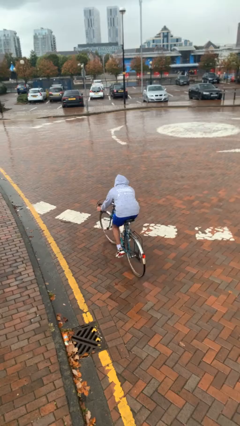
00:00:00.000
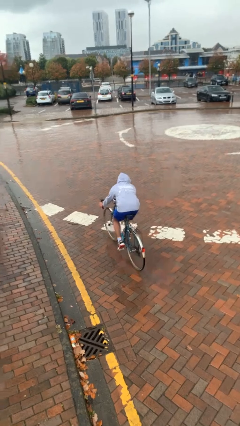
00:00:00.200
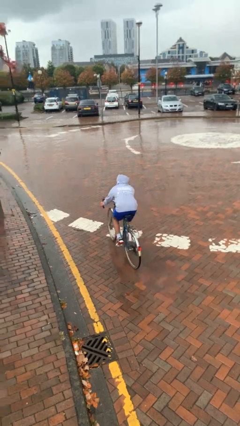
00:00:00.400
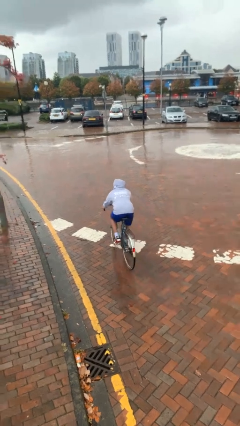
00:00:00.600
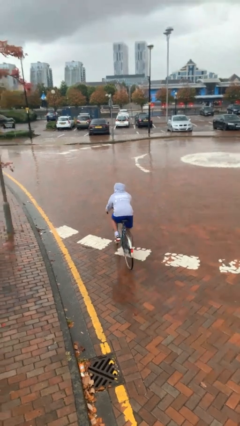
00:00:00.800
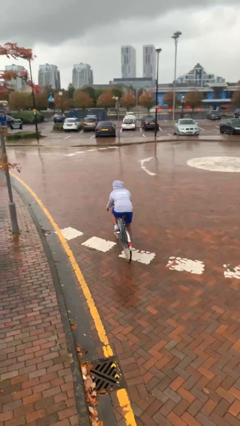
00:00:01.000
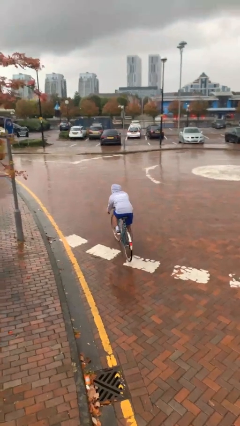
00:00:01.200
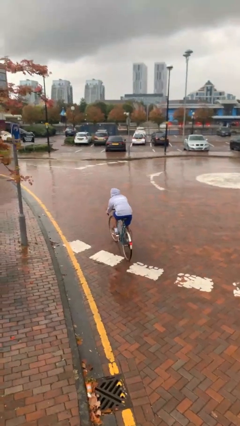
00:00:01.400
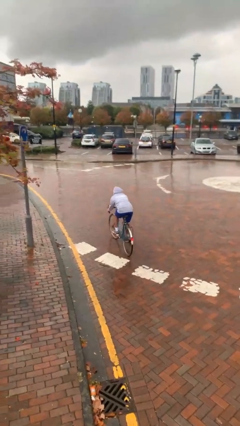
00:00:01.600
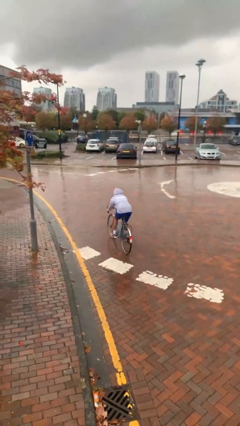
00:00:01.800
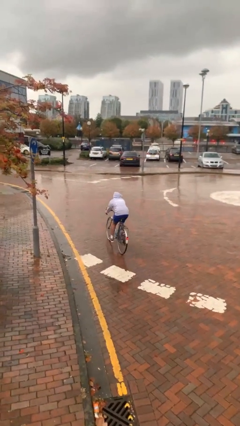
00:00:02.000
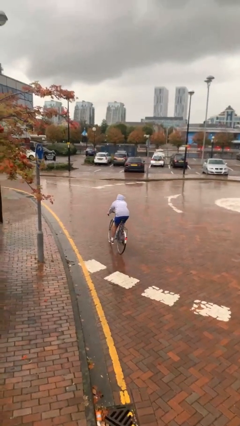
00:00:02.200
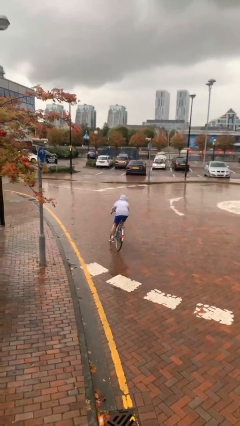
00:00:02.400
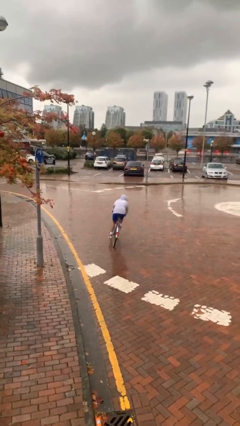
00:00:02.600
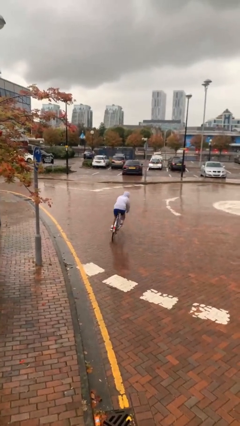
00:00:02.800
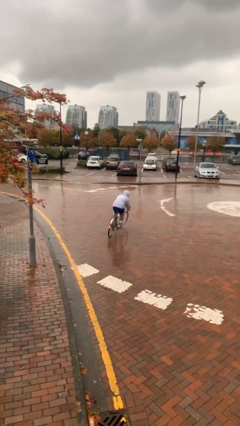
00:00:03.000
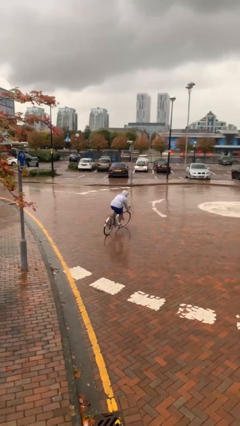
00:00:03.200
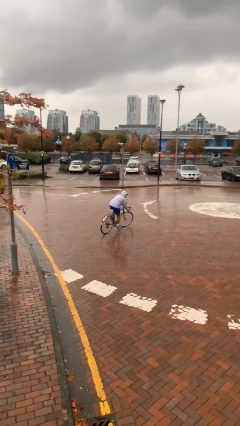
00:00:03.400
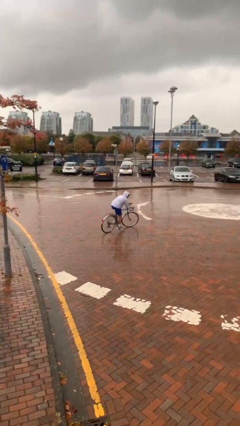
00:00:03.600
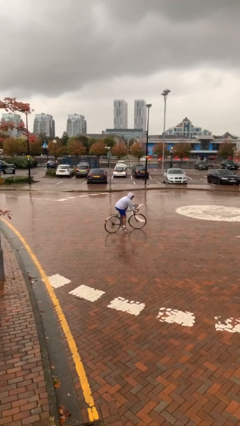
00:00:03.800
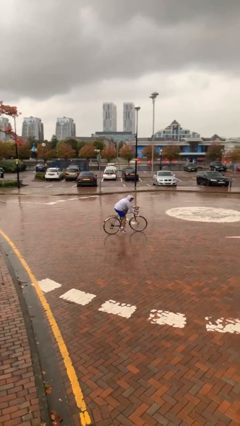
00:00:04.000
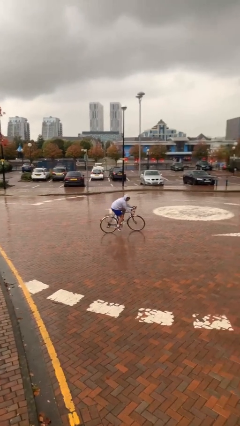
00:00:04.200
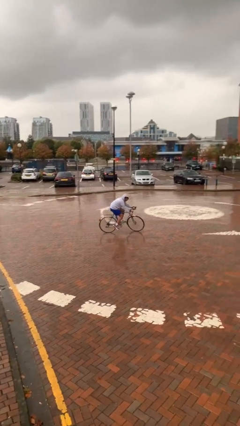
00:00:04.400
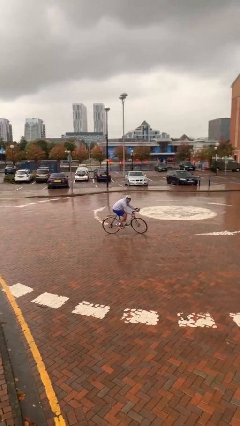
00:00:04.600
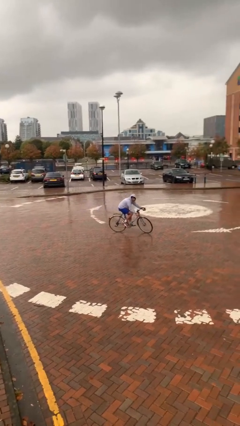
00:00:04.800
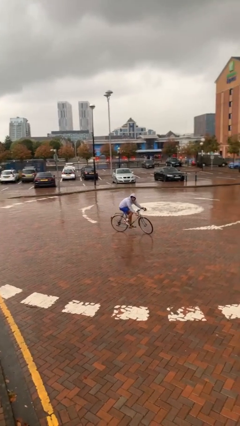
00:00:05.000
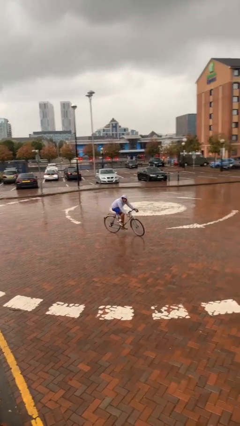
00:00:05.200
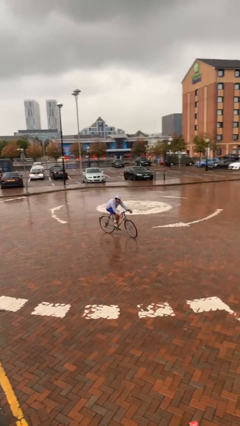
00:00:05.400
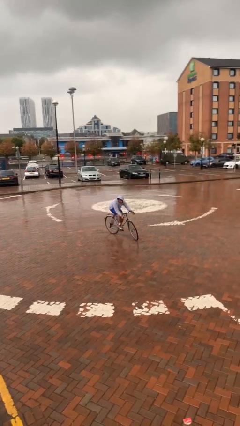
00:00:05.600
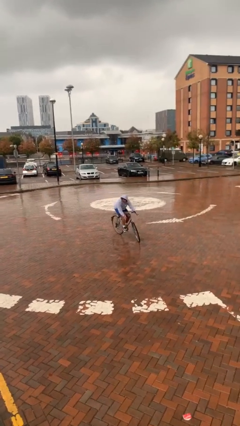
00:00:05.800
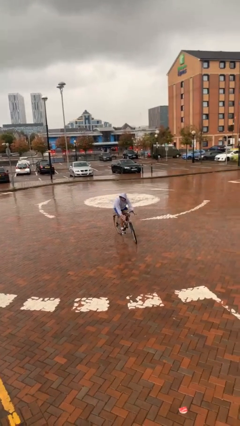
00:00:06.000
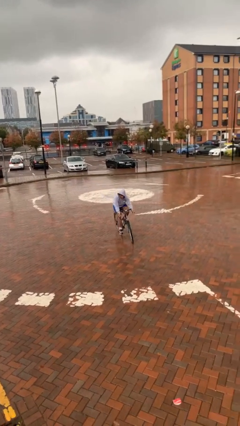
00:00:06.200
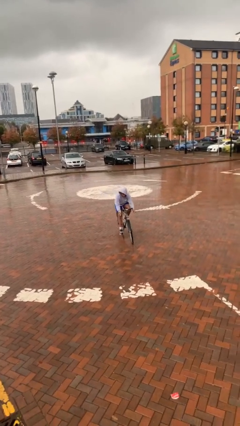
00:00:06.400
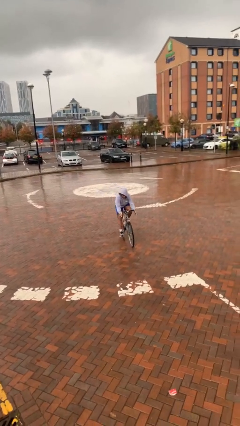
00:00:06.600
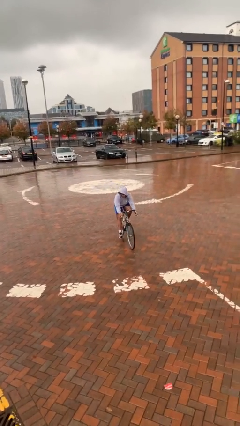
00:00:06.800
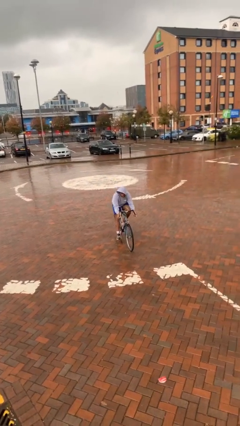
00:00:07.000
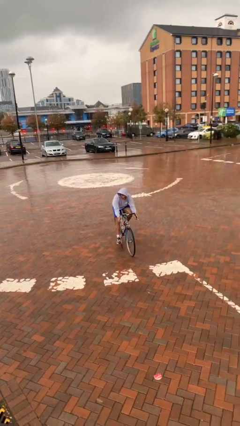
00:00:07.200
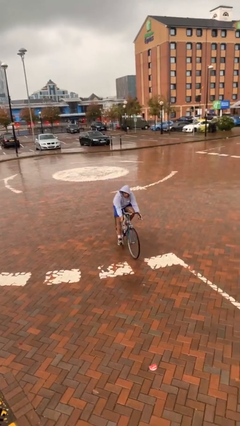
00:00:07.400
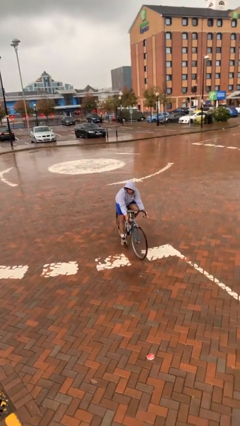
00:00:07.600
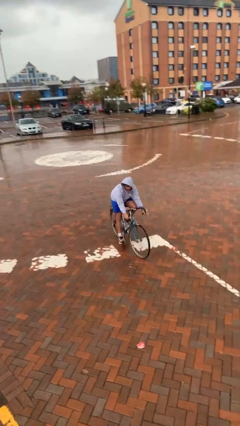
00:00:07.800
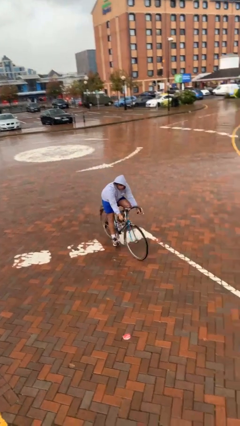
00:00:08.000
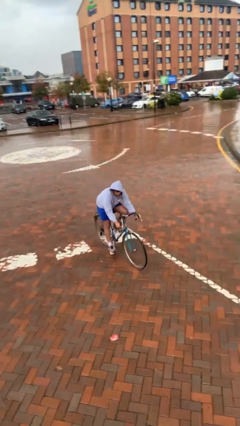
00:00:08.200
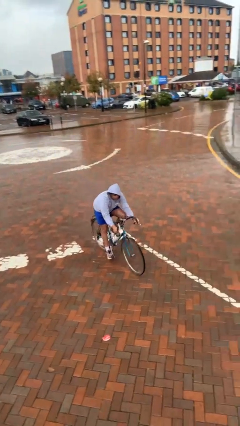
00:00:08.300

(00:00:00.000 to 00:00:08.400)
person rides bicycle

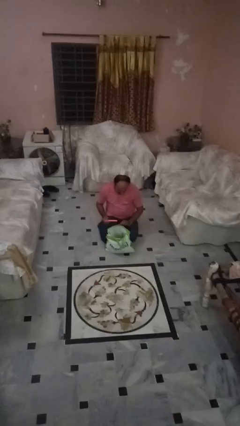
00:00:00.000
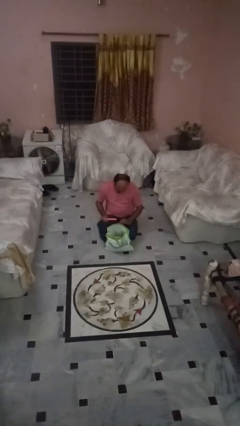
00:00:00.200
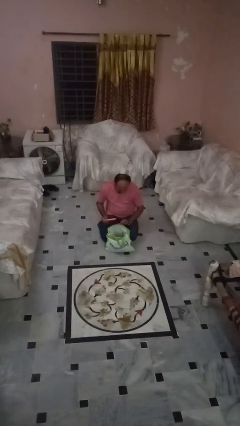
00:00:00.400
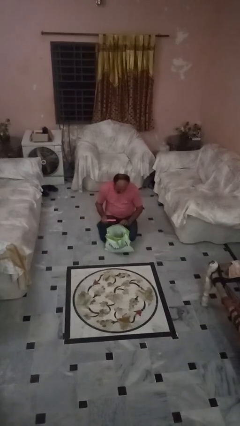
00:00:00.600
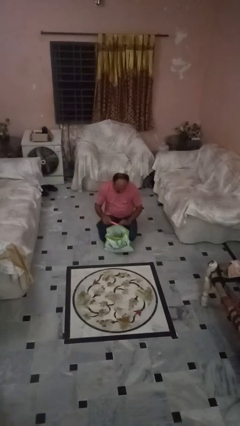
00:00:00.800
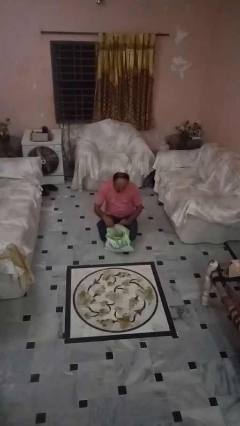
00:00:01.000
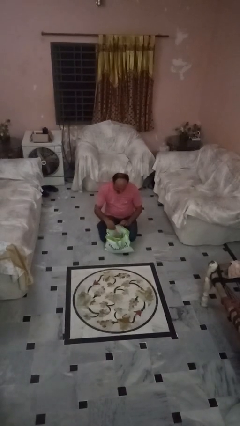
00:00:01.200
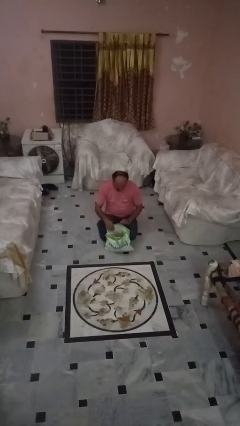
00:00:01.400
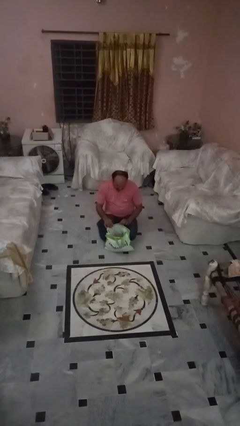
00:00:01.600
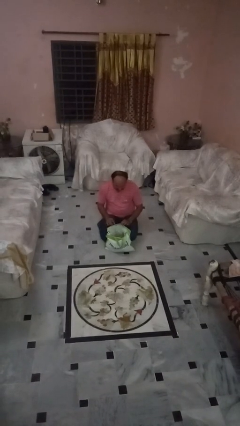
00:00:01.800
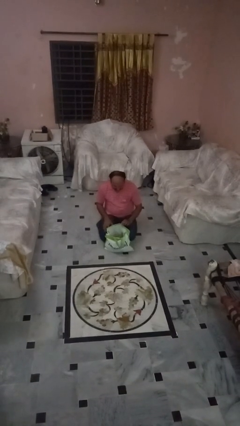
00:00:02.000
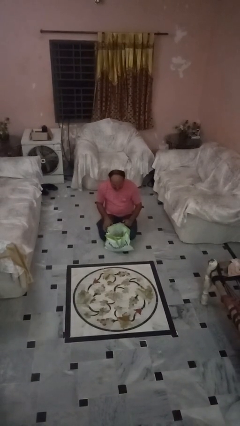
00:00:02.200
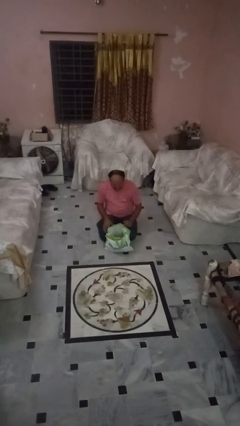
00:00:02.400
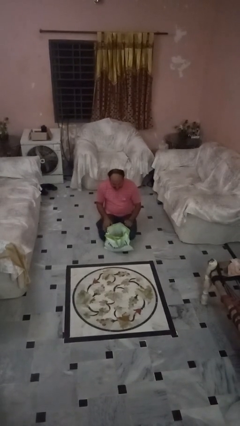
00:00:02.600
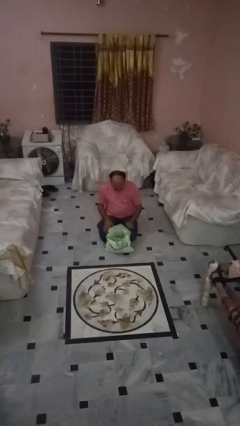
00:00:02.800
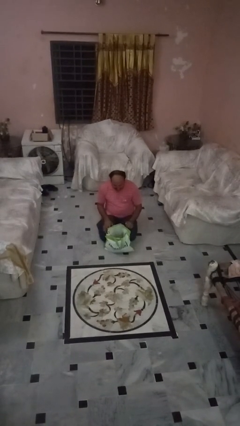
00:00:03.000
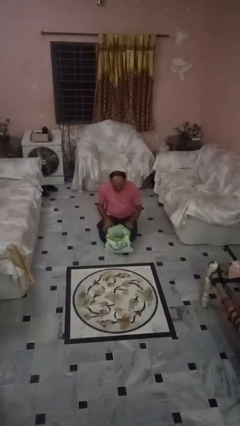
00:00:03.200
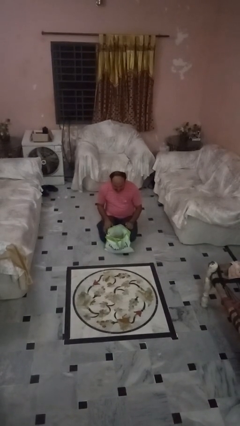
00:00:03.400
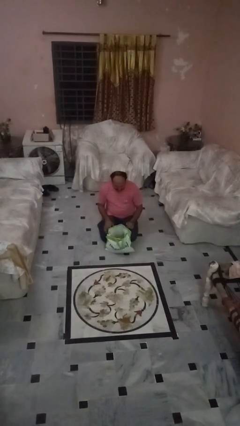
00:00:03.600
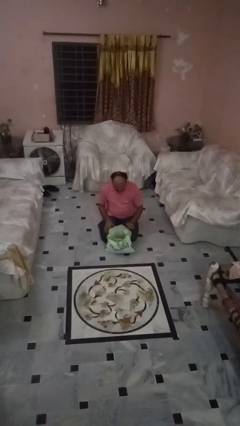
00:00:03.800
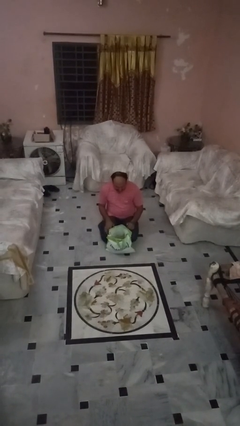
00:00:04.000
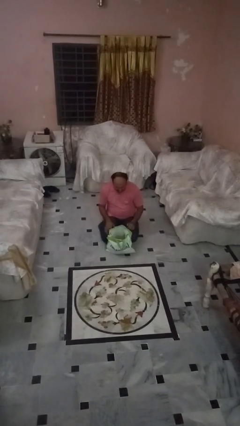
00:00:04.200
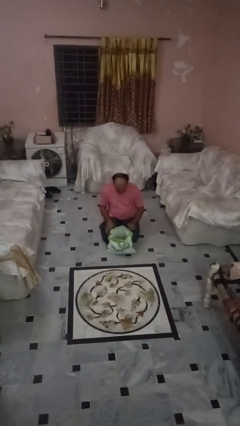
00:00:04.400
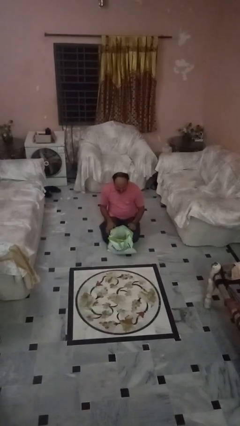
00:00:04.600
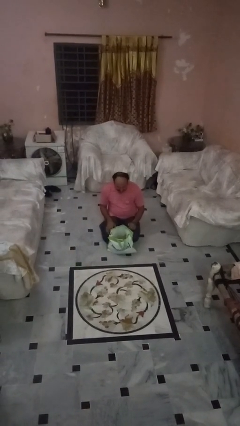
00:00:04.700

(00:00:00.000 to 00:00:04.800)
person puts object into bag

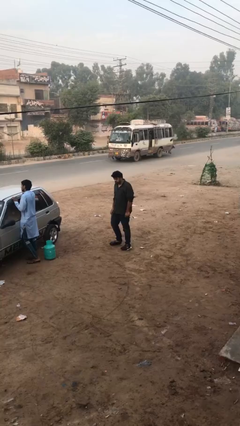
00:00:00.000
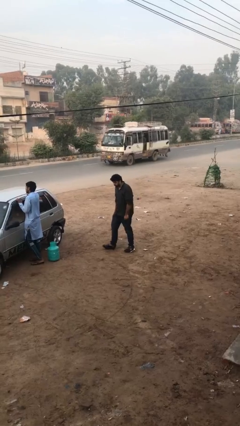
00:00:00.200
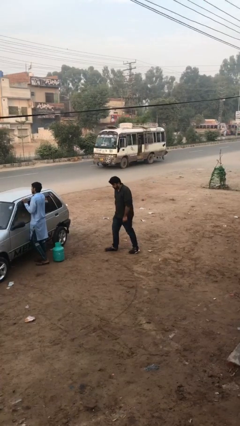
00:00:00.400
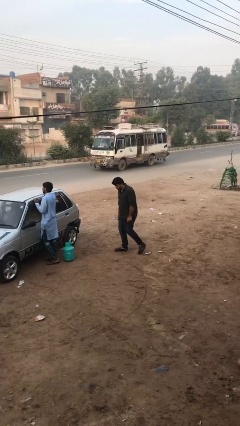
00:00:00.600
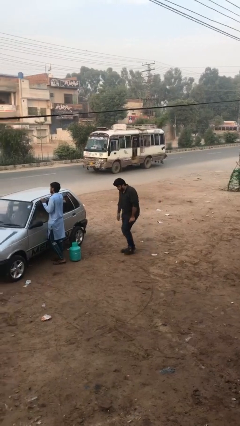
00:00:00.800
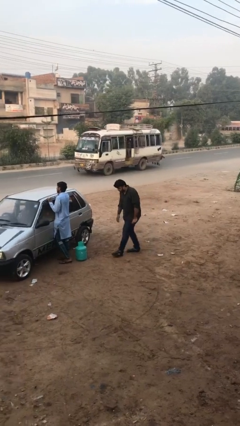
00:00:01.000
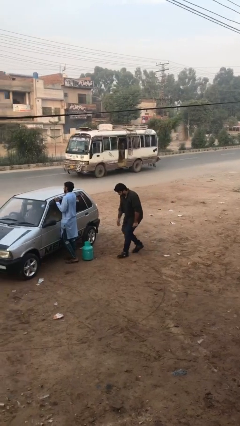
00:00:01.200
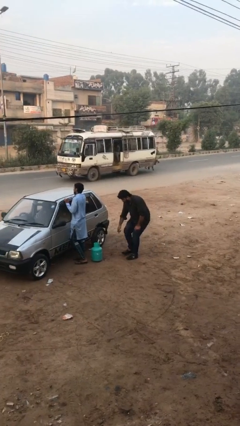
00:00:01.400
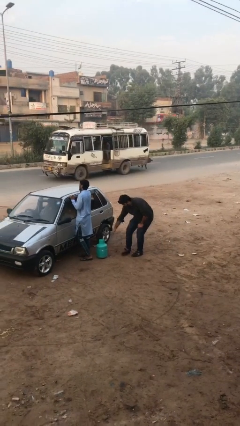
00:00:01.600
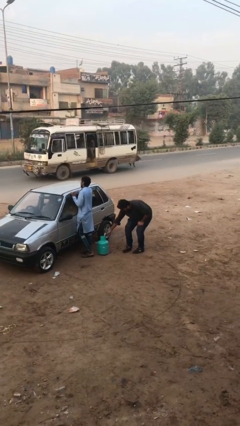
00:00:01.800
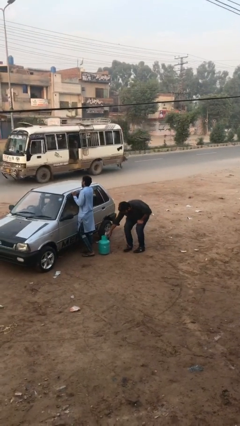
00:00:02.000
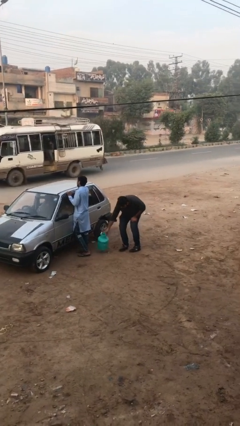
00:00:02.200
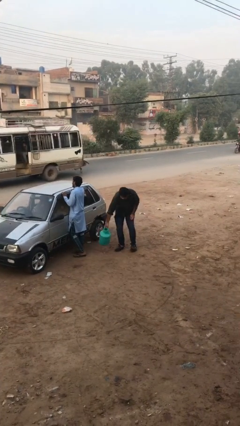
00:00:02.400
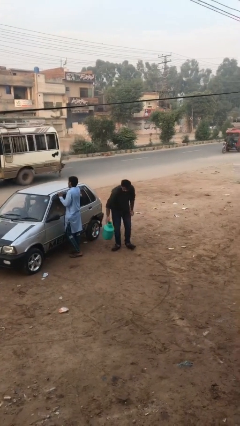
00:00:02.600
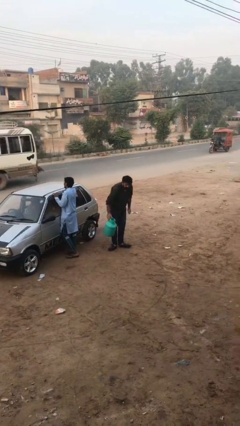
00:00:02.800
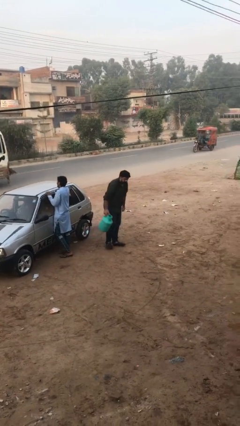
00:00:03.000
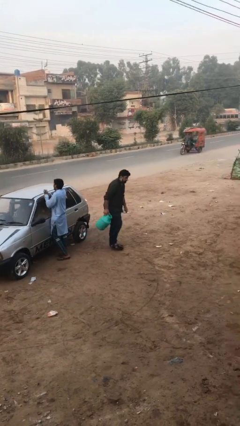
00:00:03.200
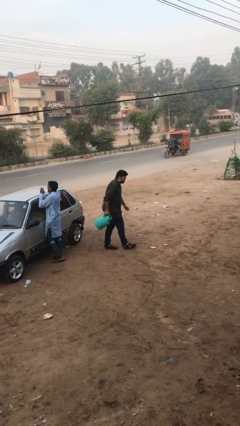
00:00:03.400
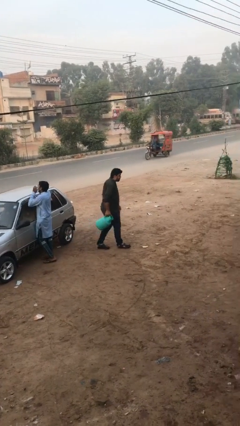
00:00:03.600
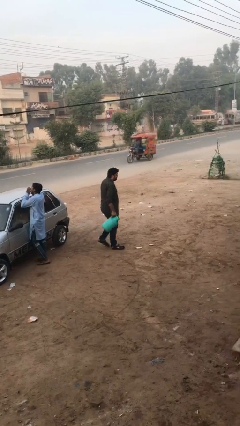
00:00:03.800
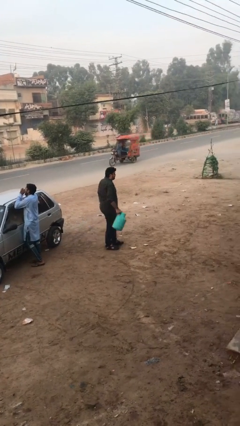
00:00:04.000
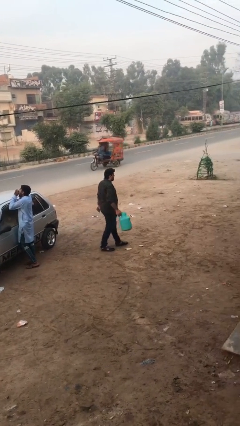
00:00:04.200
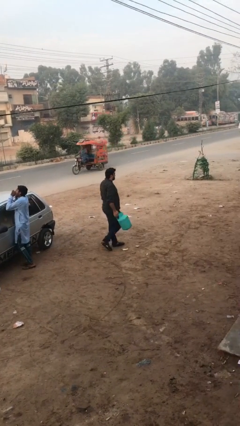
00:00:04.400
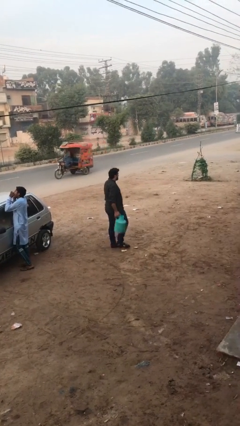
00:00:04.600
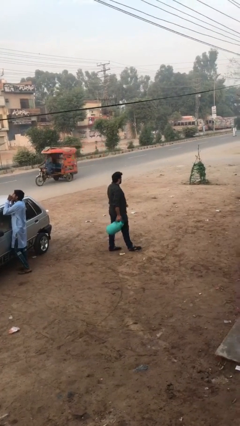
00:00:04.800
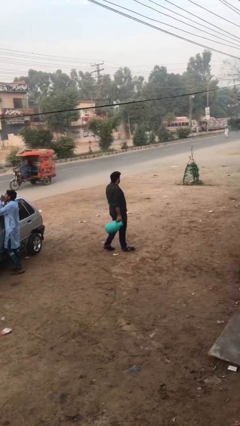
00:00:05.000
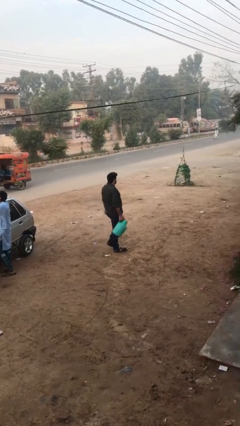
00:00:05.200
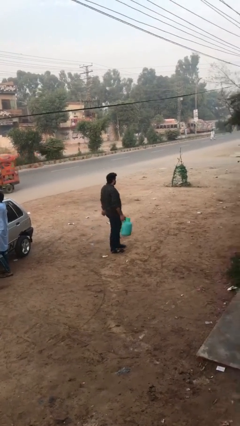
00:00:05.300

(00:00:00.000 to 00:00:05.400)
person steals object from person
